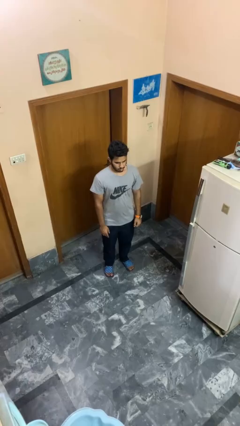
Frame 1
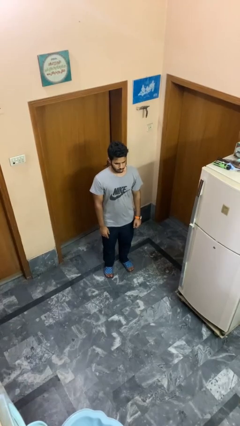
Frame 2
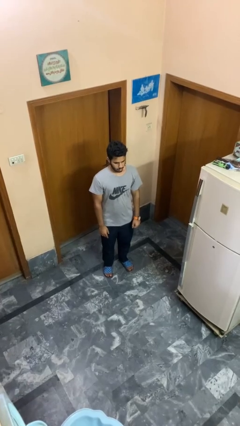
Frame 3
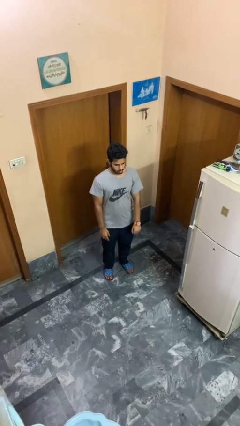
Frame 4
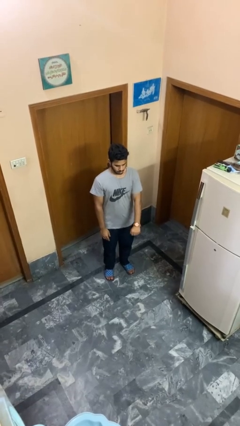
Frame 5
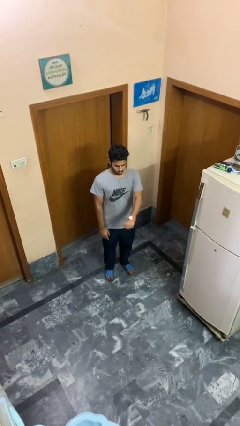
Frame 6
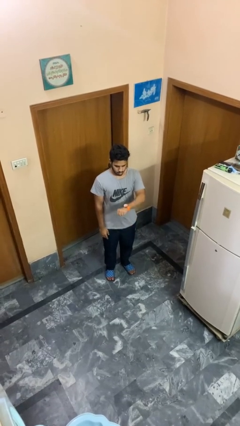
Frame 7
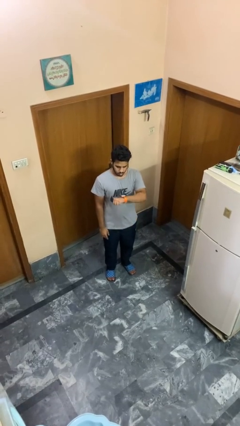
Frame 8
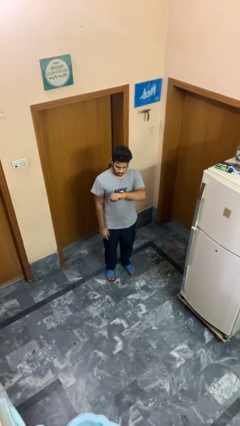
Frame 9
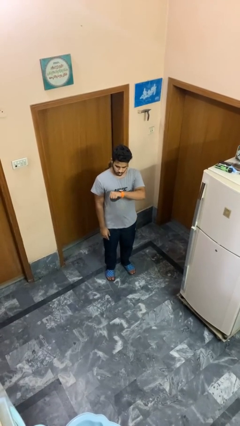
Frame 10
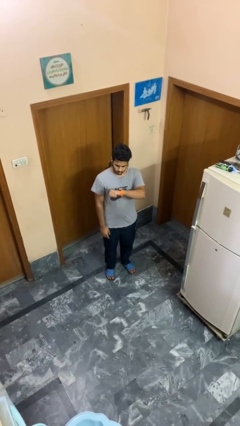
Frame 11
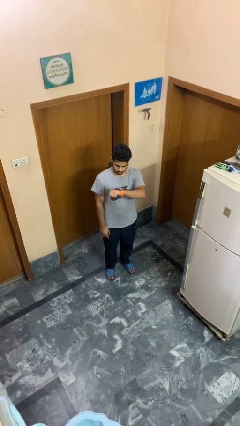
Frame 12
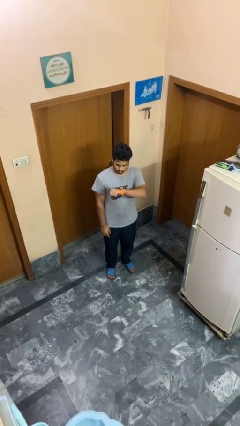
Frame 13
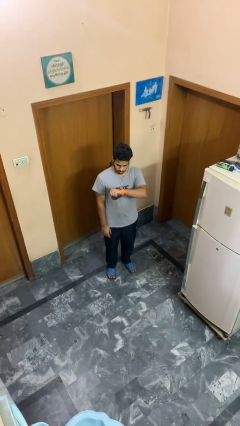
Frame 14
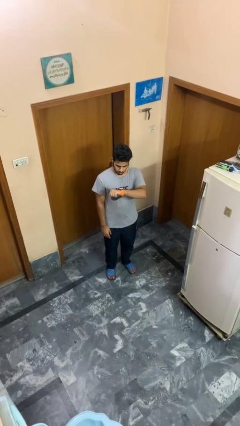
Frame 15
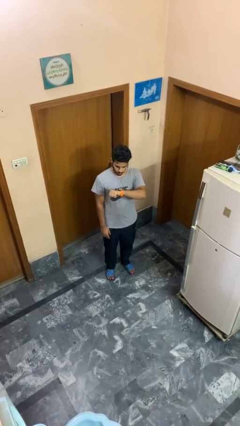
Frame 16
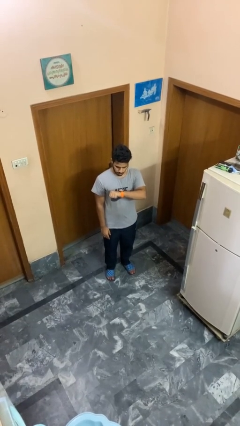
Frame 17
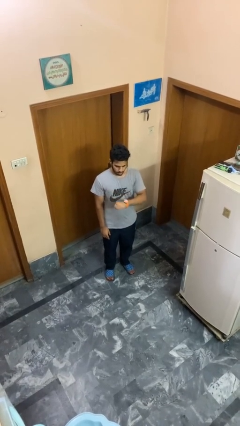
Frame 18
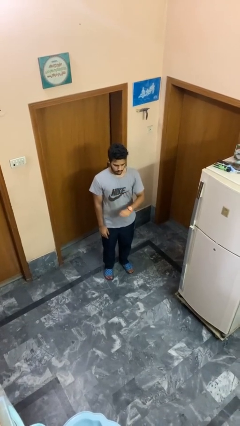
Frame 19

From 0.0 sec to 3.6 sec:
person looks at wristwatch

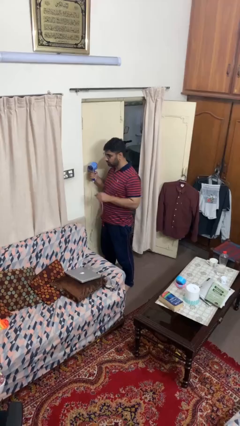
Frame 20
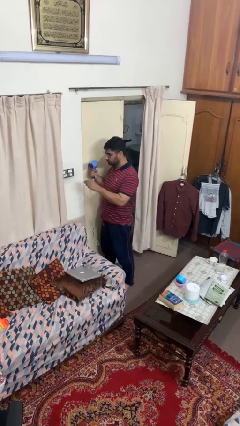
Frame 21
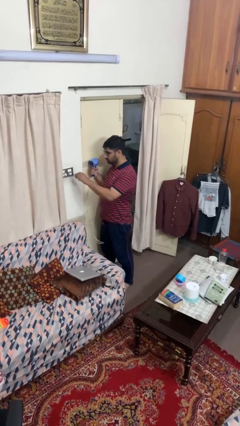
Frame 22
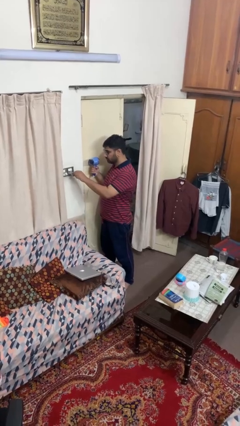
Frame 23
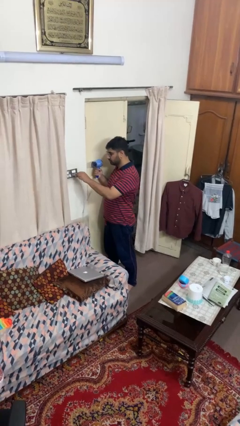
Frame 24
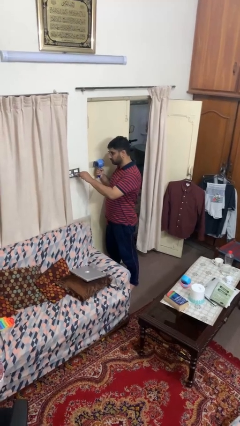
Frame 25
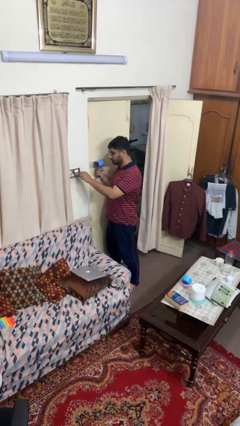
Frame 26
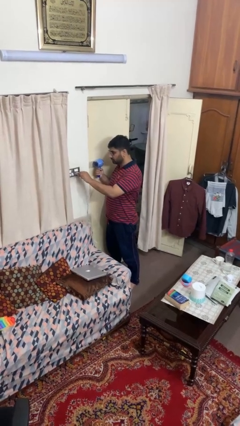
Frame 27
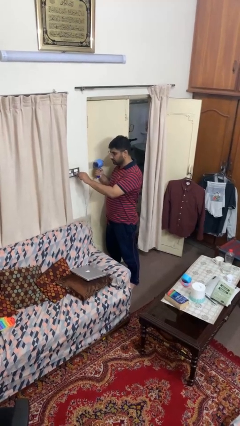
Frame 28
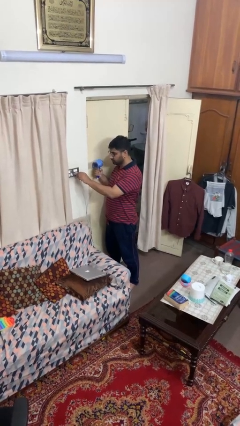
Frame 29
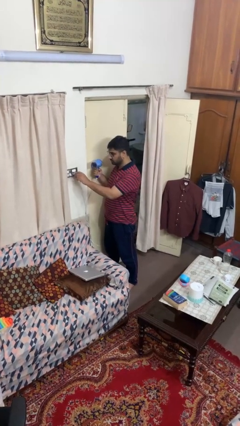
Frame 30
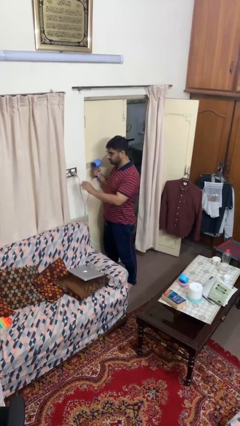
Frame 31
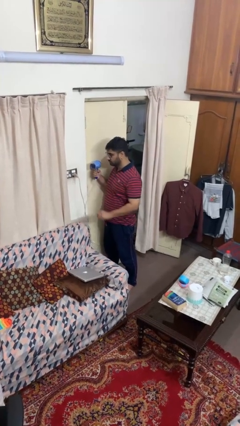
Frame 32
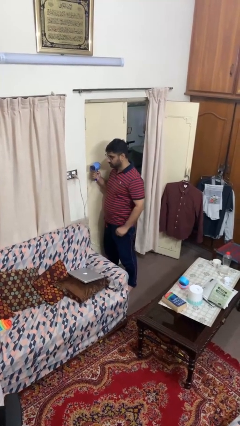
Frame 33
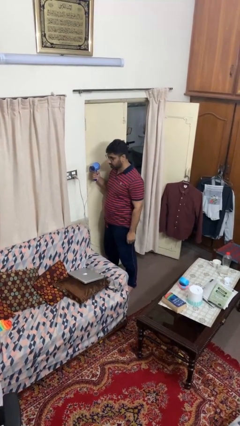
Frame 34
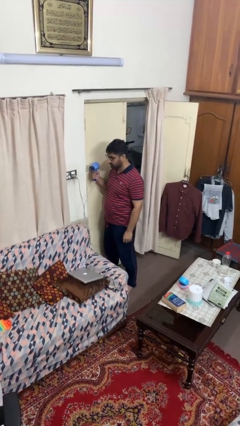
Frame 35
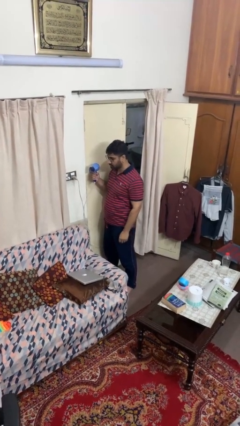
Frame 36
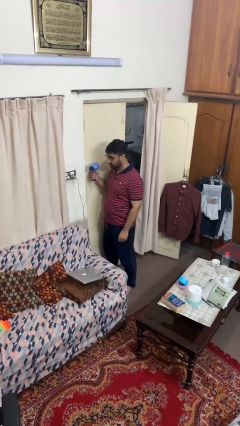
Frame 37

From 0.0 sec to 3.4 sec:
person plugs into electrical socket

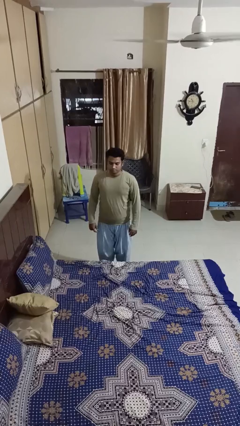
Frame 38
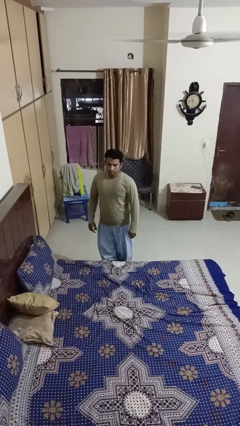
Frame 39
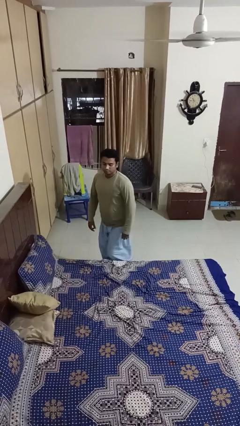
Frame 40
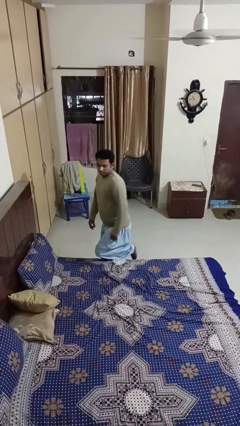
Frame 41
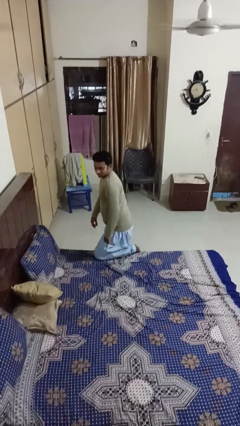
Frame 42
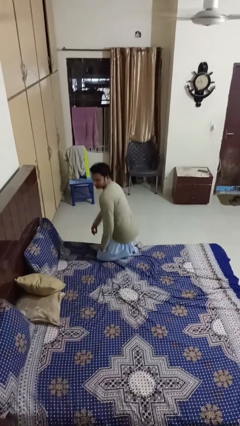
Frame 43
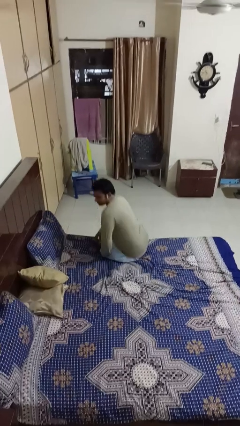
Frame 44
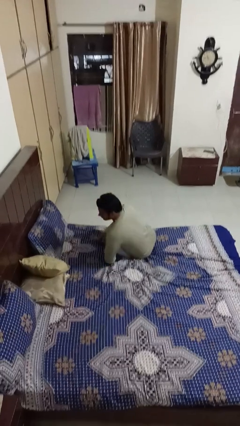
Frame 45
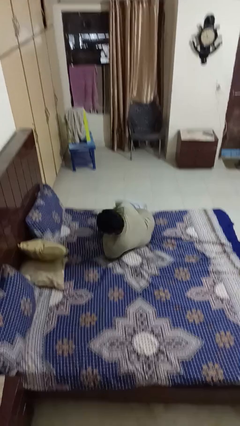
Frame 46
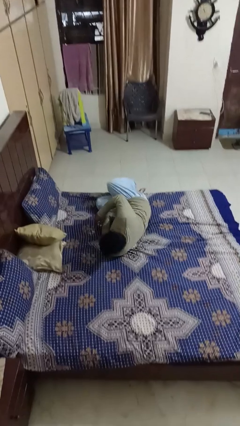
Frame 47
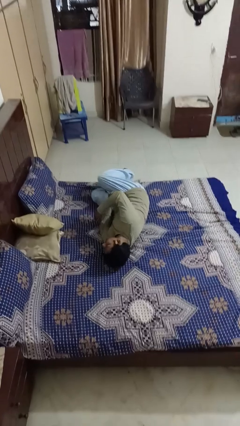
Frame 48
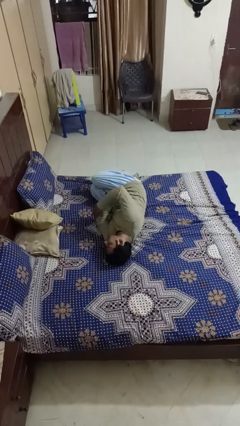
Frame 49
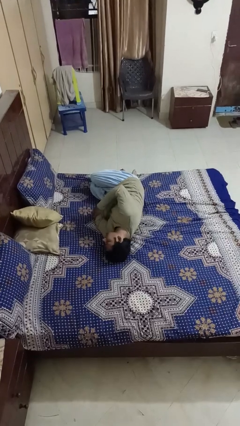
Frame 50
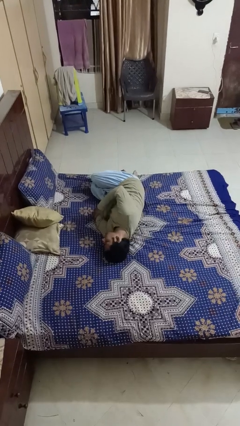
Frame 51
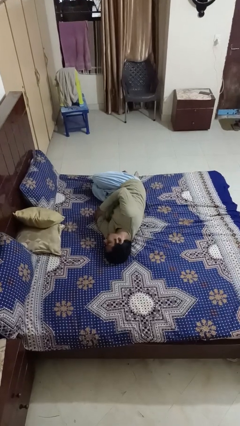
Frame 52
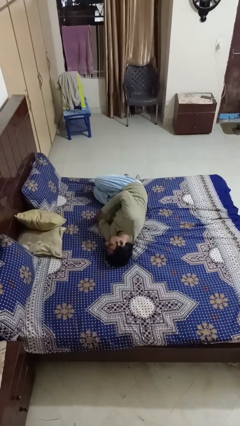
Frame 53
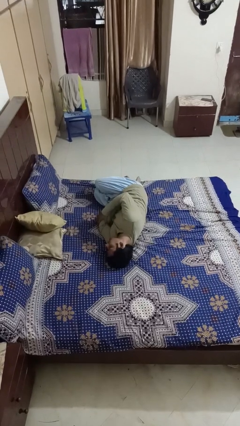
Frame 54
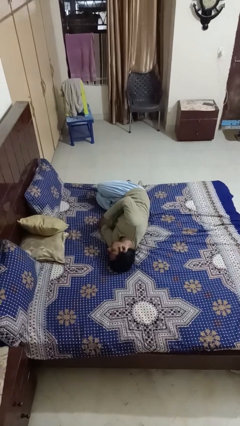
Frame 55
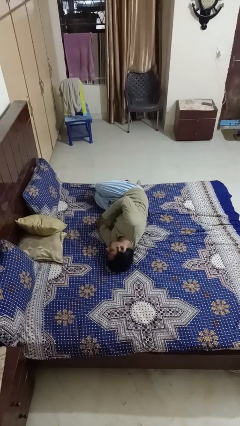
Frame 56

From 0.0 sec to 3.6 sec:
person lies down on bed

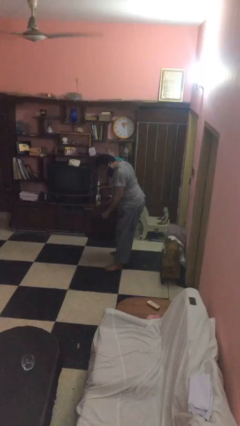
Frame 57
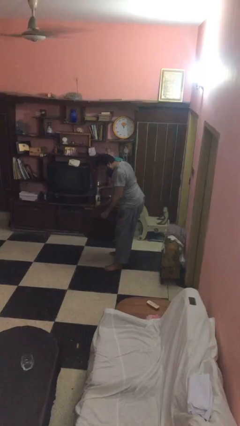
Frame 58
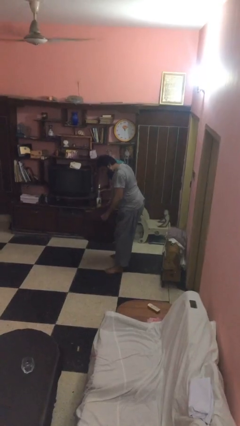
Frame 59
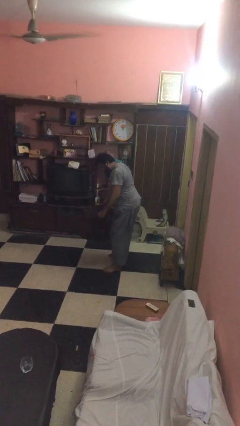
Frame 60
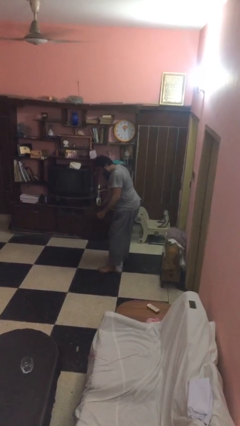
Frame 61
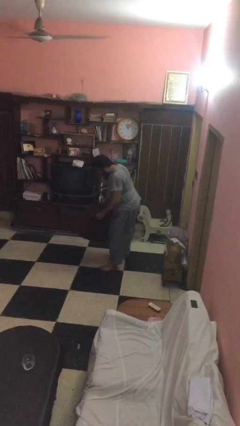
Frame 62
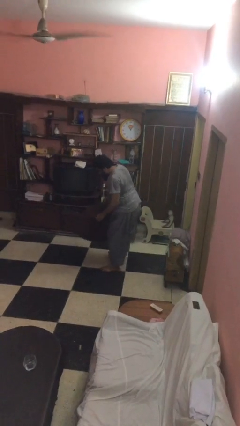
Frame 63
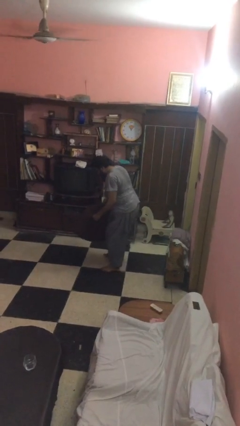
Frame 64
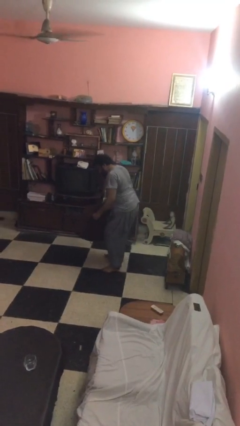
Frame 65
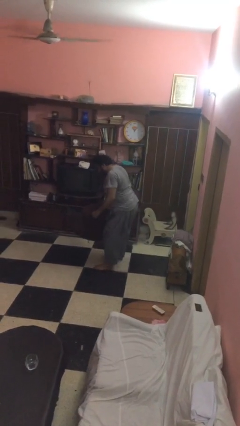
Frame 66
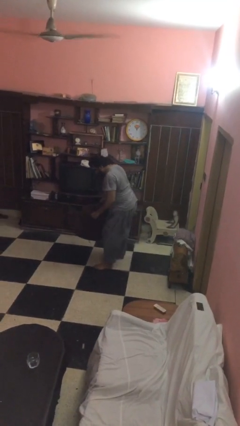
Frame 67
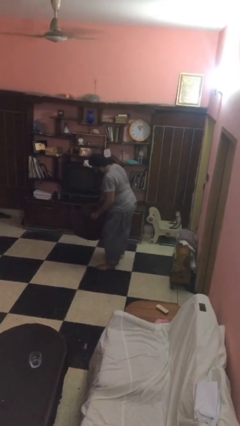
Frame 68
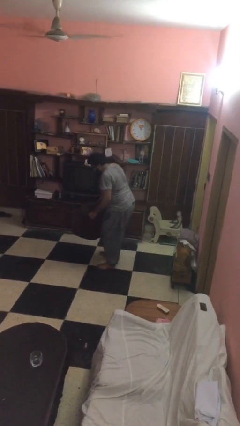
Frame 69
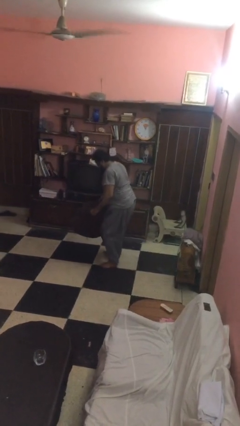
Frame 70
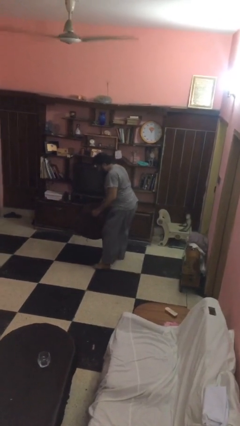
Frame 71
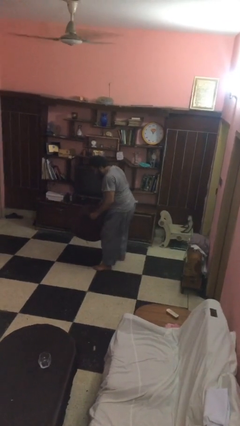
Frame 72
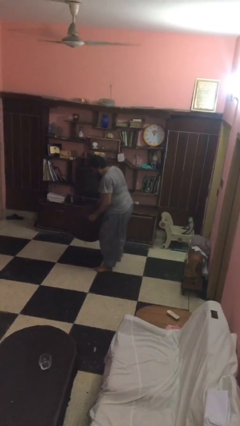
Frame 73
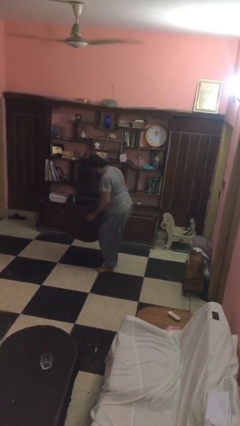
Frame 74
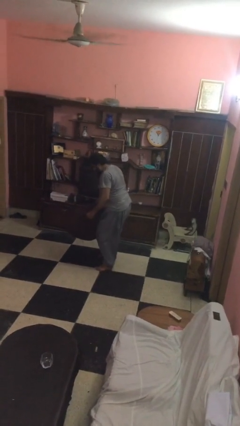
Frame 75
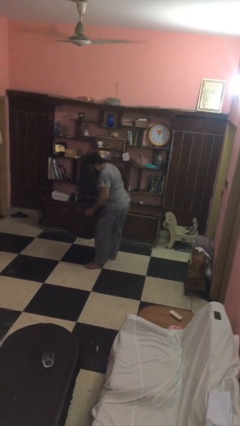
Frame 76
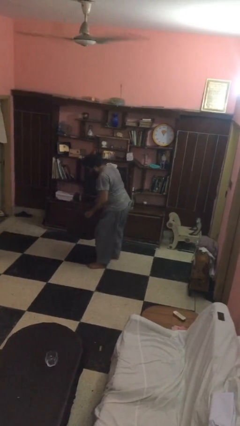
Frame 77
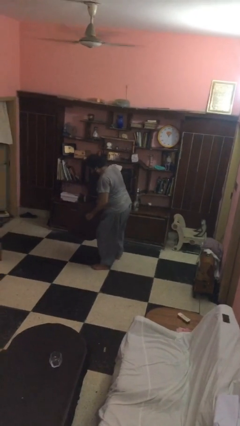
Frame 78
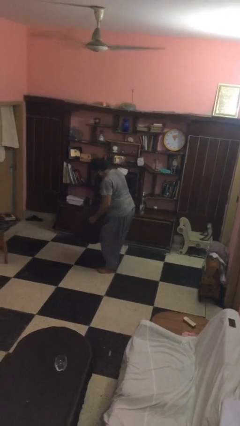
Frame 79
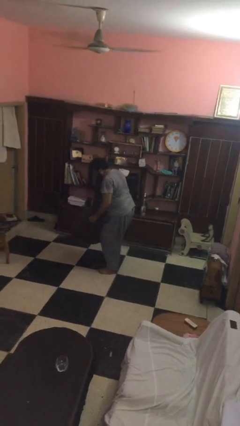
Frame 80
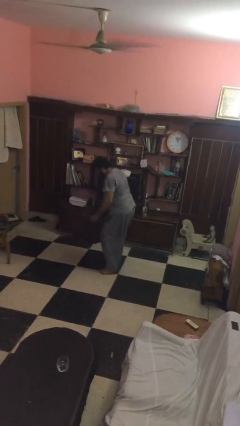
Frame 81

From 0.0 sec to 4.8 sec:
person carries heavy object

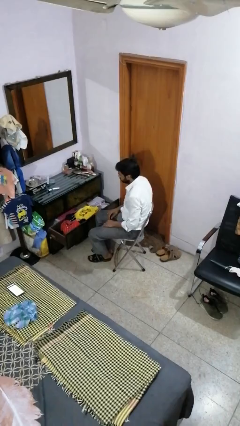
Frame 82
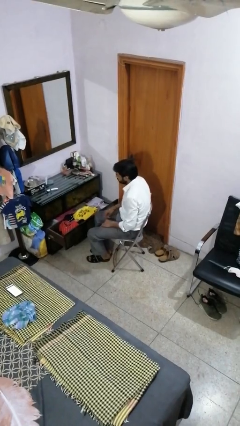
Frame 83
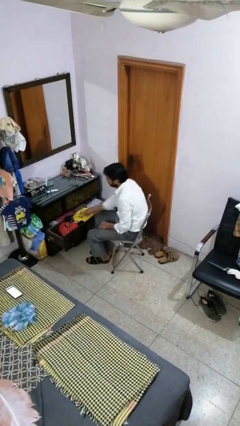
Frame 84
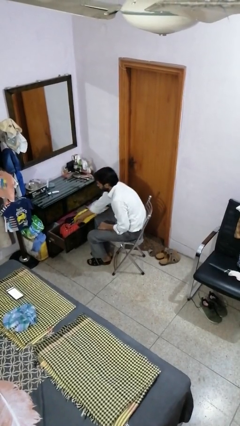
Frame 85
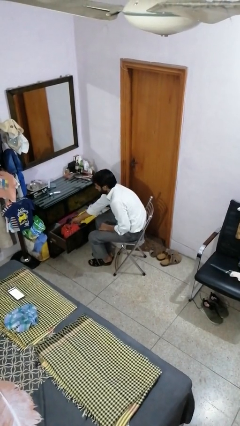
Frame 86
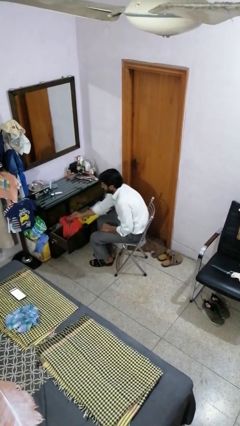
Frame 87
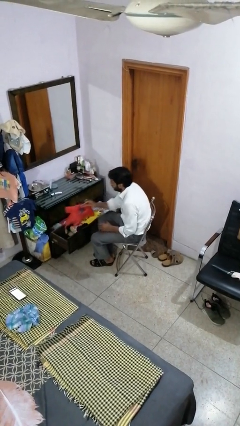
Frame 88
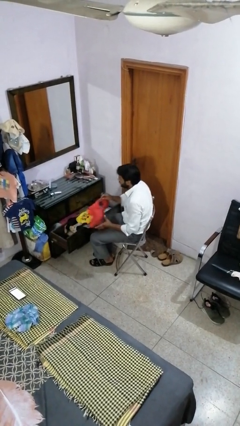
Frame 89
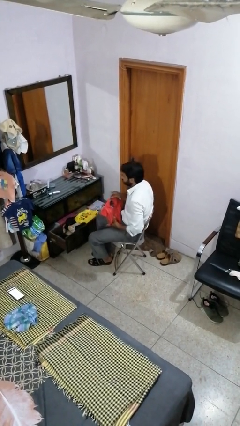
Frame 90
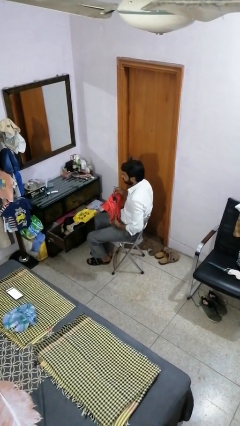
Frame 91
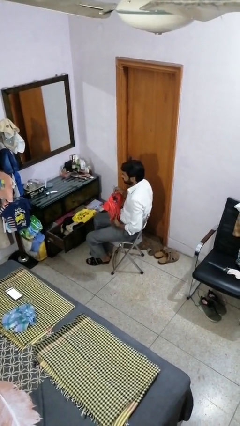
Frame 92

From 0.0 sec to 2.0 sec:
person takes clothes from dresser
